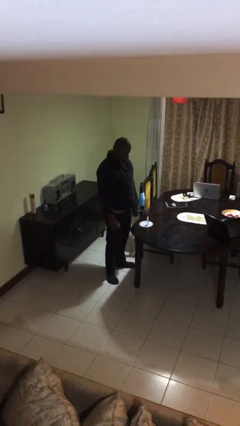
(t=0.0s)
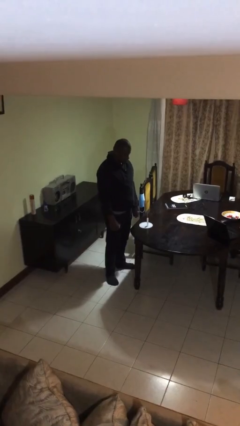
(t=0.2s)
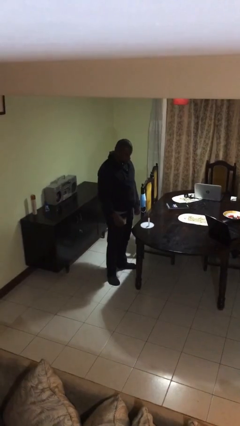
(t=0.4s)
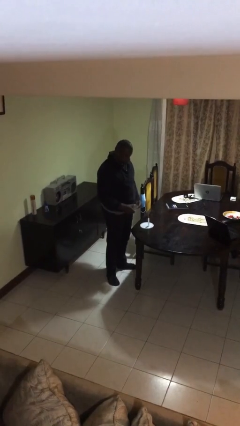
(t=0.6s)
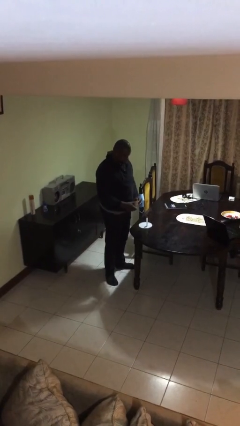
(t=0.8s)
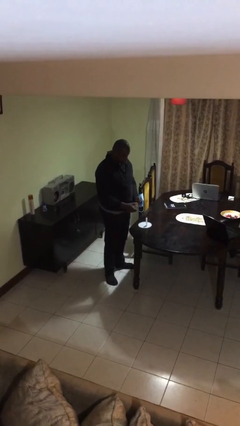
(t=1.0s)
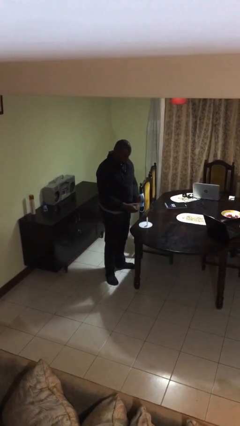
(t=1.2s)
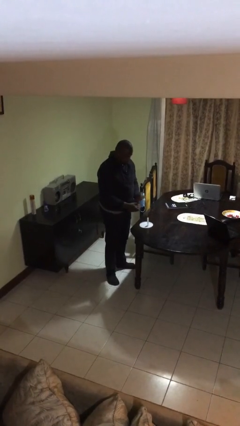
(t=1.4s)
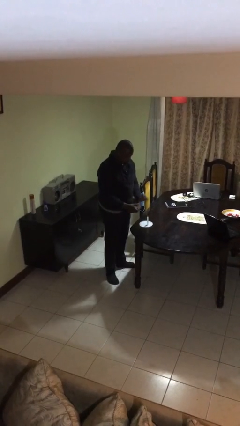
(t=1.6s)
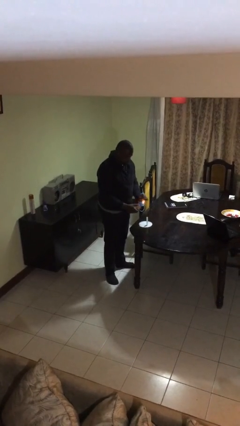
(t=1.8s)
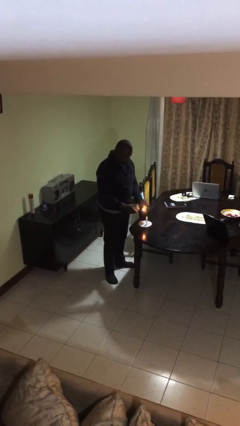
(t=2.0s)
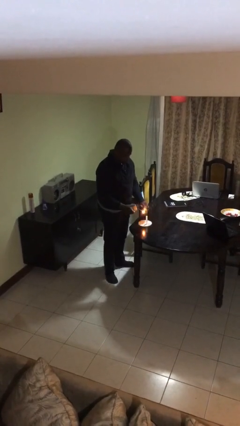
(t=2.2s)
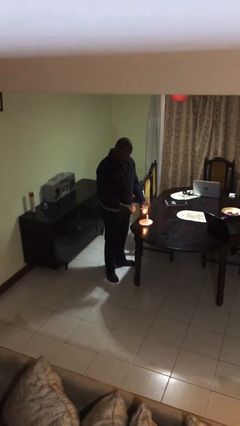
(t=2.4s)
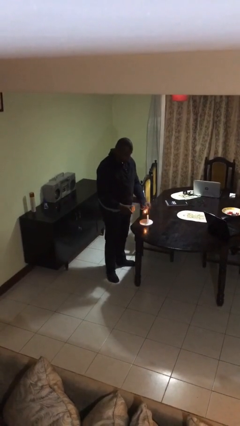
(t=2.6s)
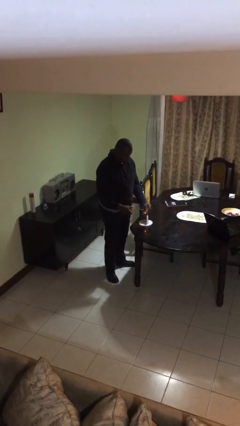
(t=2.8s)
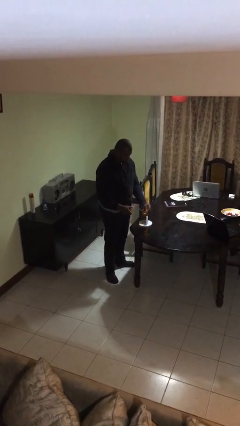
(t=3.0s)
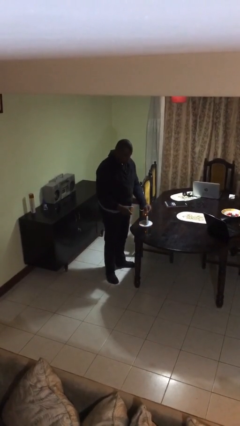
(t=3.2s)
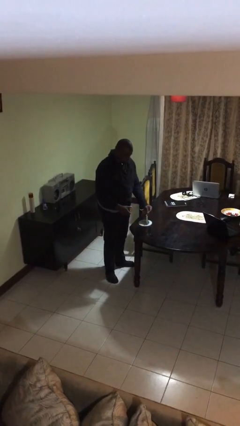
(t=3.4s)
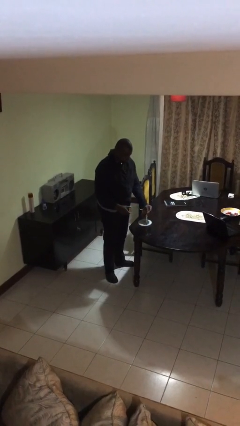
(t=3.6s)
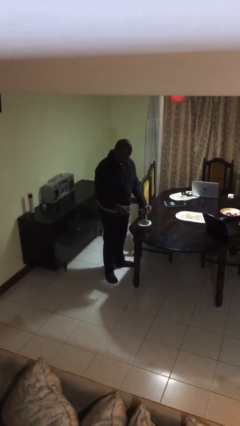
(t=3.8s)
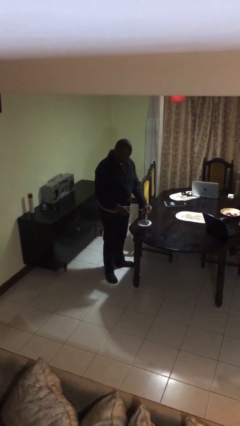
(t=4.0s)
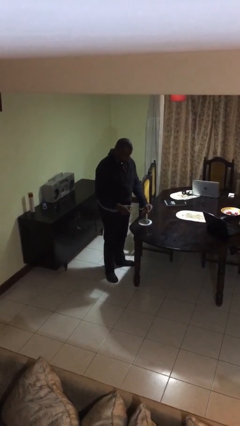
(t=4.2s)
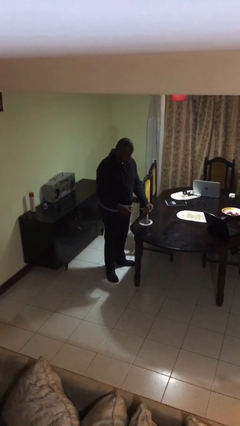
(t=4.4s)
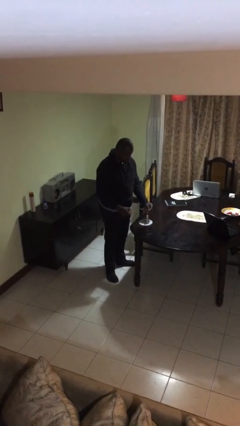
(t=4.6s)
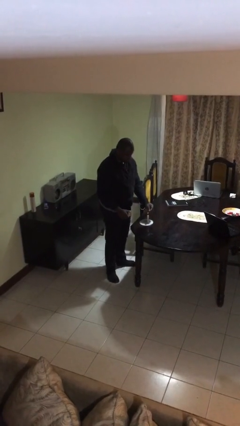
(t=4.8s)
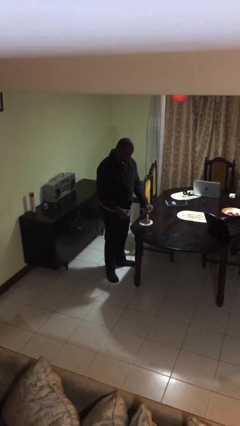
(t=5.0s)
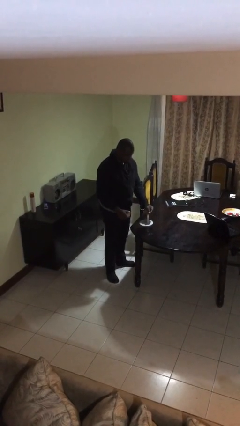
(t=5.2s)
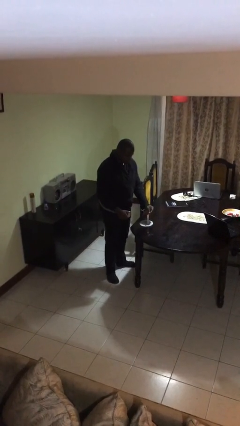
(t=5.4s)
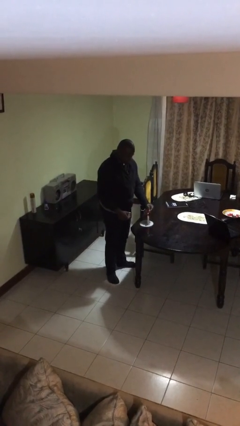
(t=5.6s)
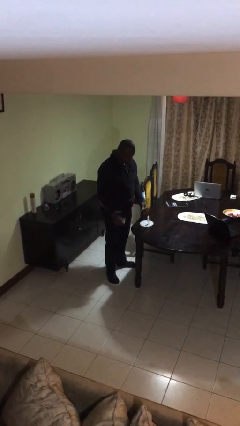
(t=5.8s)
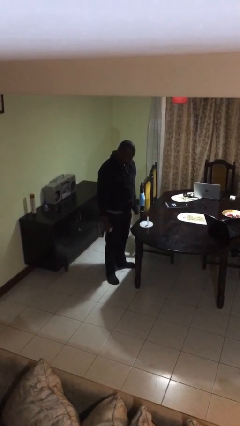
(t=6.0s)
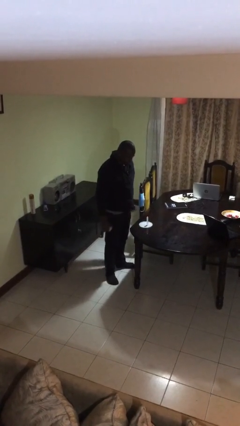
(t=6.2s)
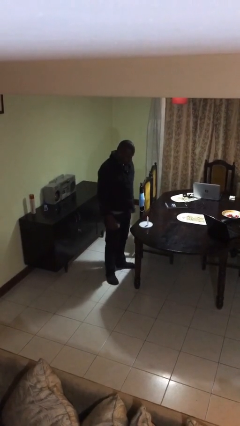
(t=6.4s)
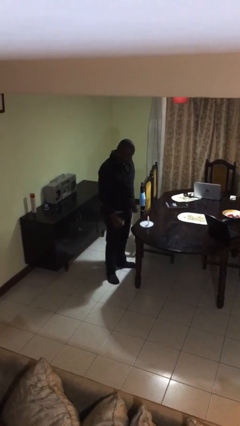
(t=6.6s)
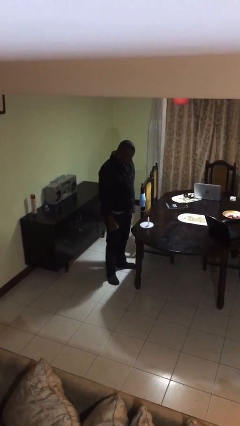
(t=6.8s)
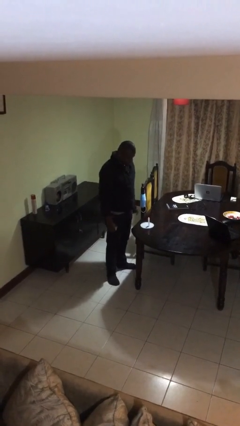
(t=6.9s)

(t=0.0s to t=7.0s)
person lights candle

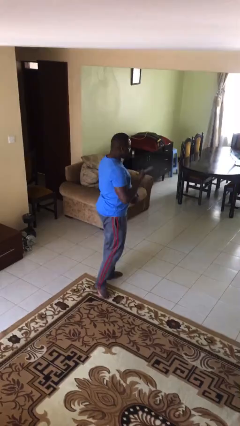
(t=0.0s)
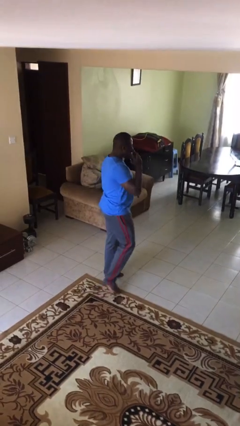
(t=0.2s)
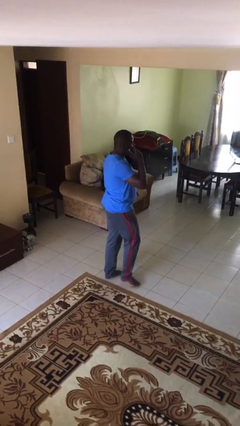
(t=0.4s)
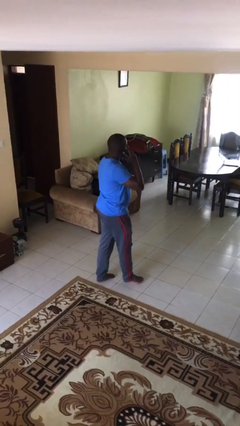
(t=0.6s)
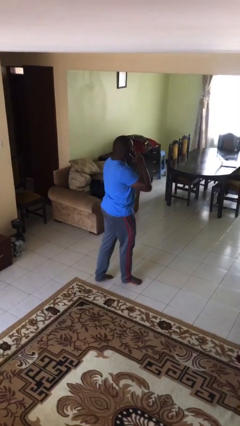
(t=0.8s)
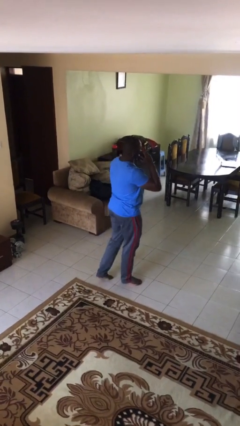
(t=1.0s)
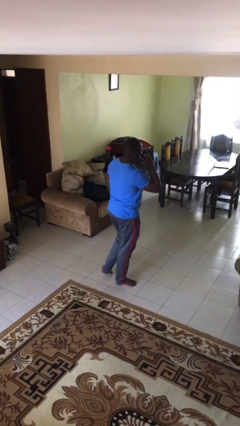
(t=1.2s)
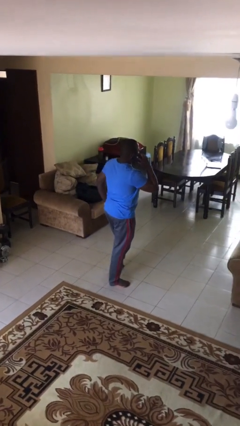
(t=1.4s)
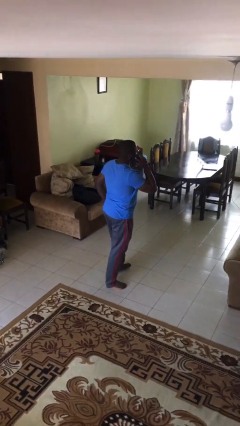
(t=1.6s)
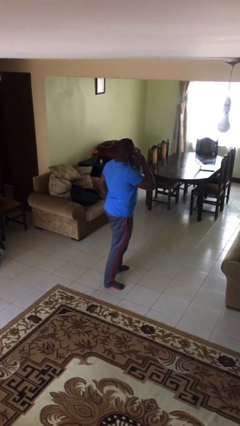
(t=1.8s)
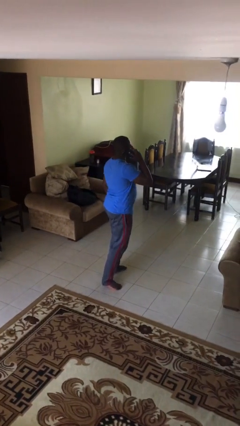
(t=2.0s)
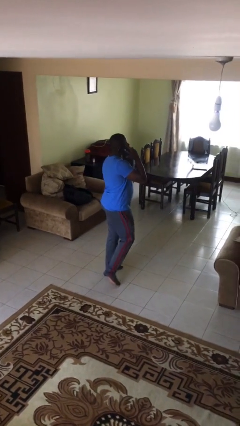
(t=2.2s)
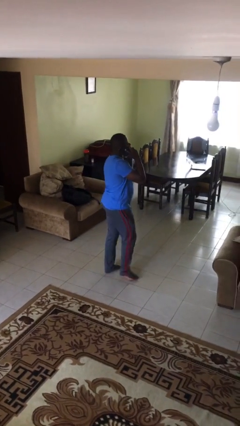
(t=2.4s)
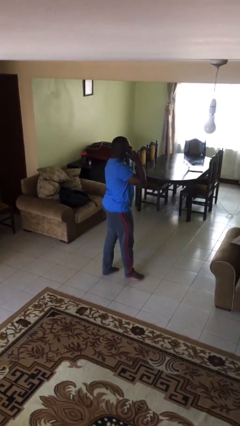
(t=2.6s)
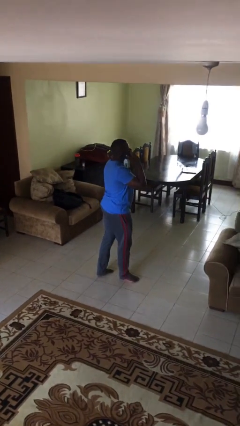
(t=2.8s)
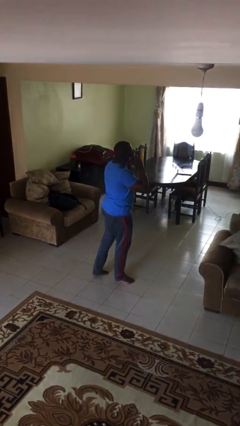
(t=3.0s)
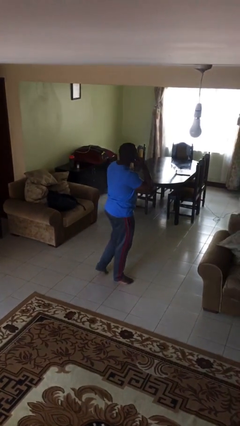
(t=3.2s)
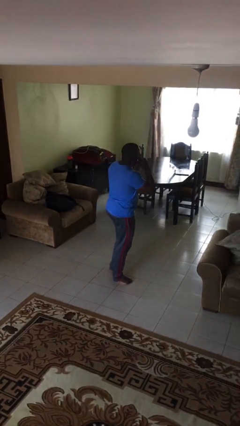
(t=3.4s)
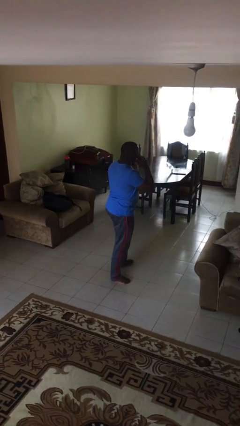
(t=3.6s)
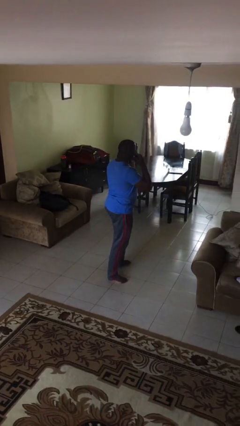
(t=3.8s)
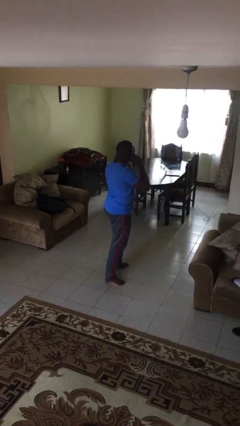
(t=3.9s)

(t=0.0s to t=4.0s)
person talks on phone

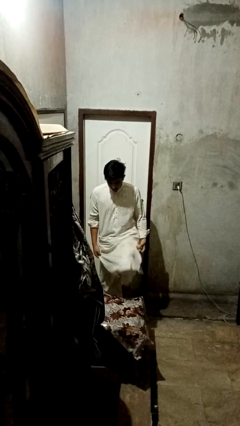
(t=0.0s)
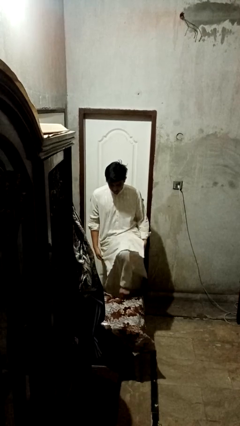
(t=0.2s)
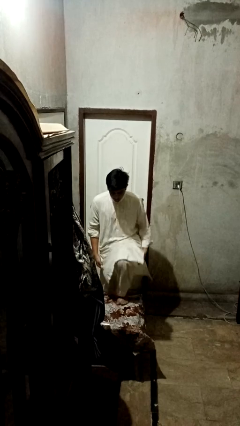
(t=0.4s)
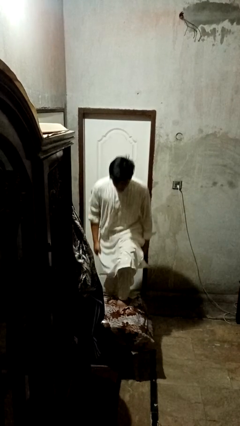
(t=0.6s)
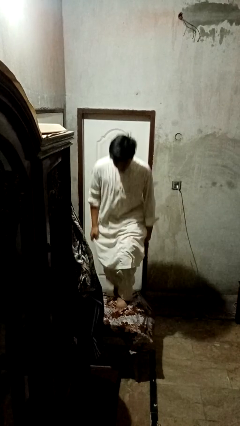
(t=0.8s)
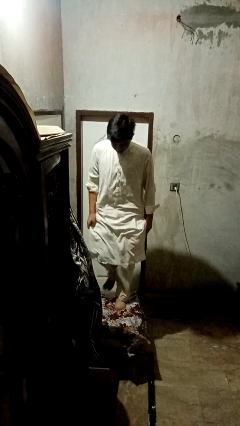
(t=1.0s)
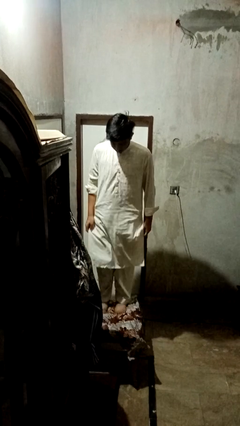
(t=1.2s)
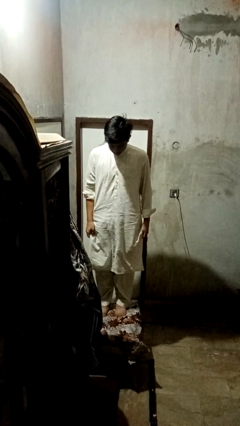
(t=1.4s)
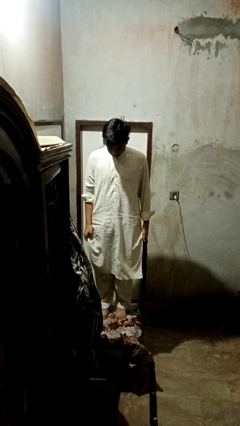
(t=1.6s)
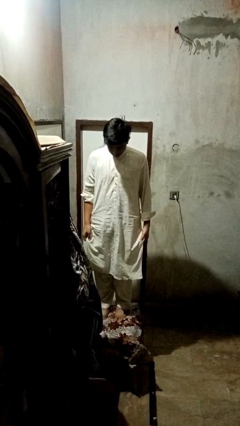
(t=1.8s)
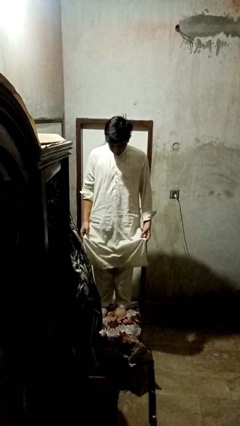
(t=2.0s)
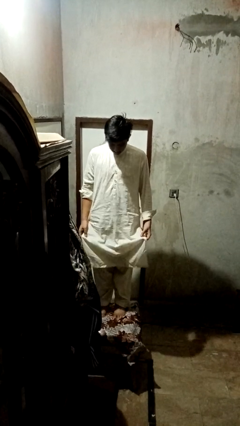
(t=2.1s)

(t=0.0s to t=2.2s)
person climbs on table

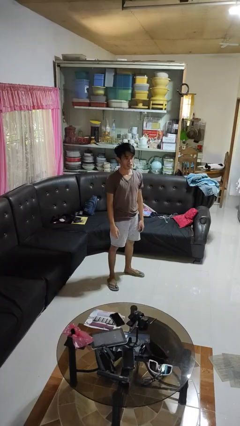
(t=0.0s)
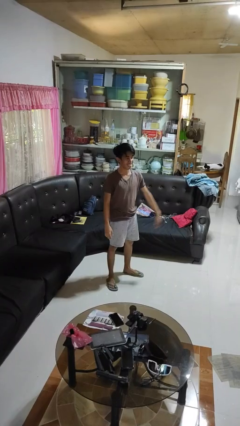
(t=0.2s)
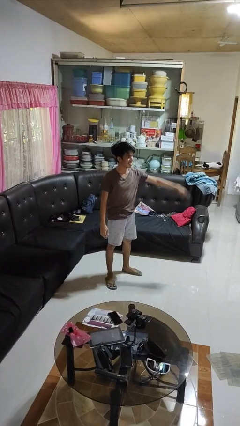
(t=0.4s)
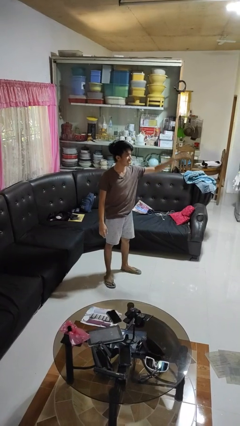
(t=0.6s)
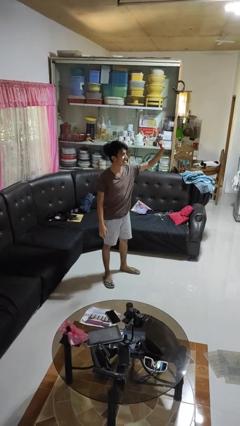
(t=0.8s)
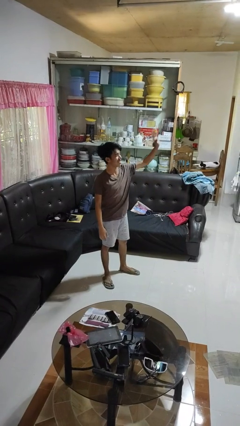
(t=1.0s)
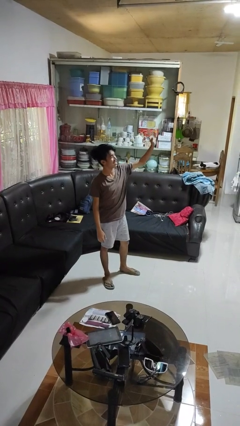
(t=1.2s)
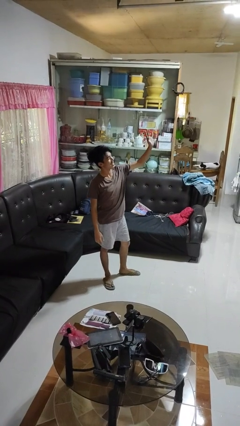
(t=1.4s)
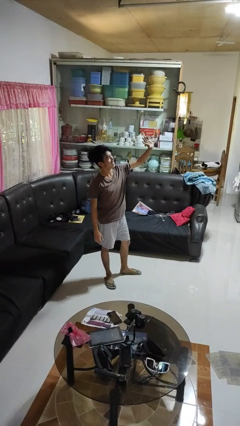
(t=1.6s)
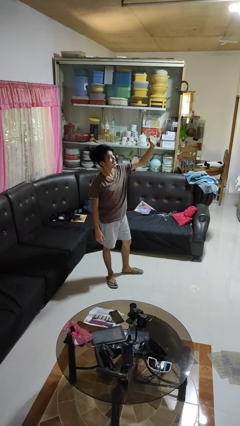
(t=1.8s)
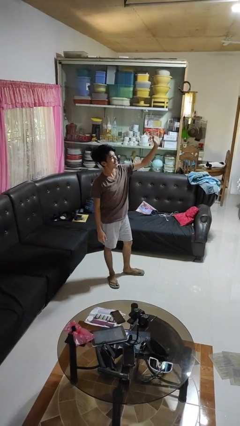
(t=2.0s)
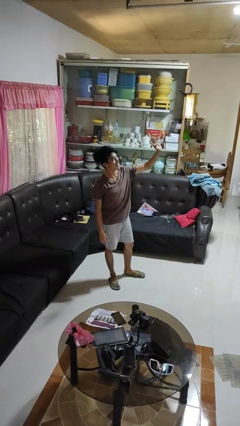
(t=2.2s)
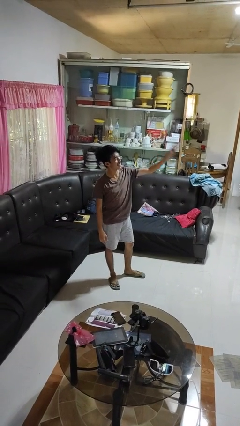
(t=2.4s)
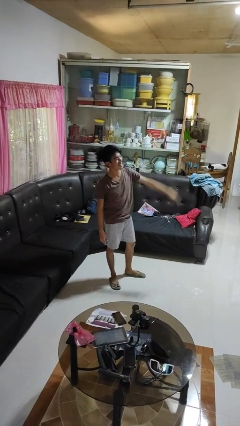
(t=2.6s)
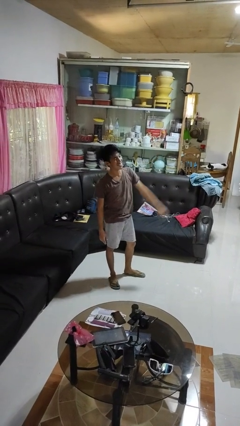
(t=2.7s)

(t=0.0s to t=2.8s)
person waves at person

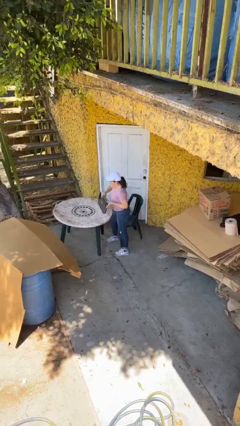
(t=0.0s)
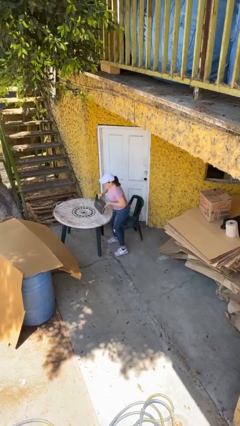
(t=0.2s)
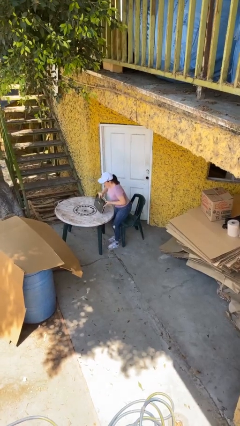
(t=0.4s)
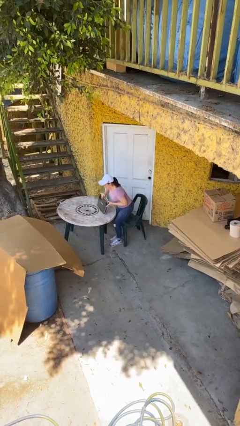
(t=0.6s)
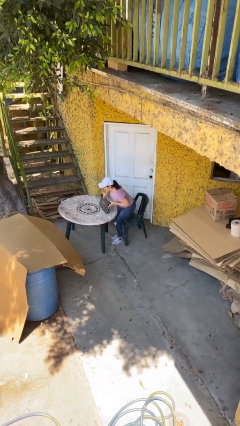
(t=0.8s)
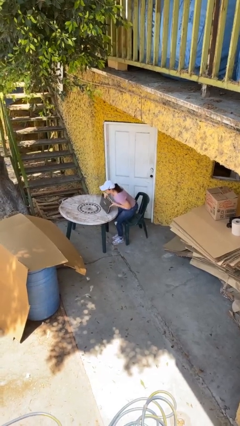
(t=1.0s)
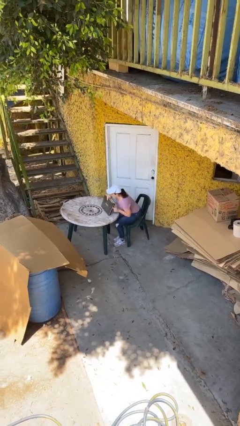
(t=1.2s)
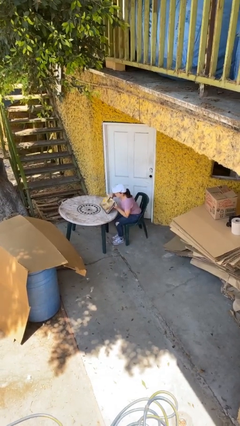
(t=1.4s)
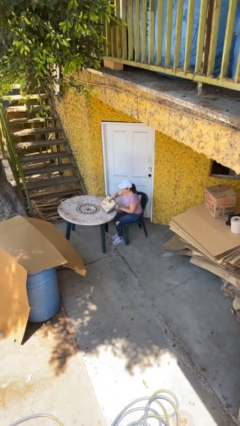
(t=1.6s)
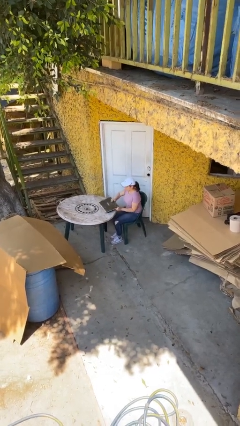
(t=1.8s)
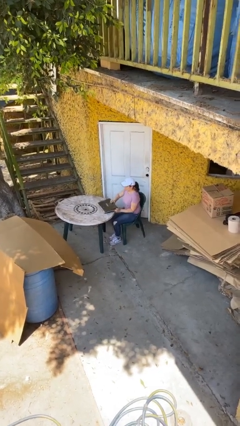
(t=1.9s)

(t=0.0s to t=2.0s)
person sits down
